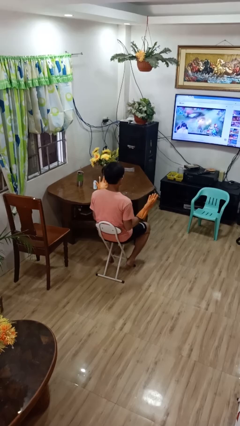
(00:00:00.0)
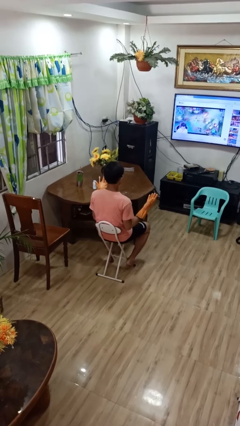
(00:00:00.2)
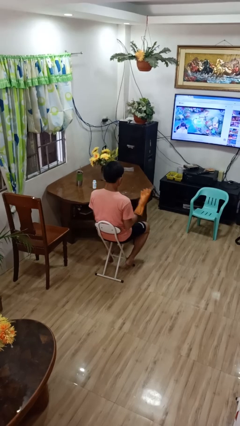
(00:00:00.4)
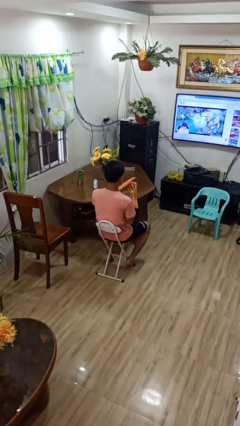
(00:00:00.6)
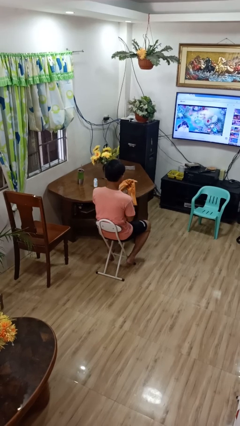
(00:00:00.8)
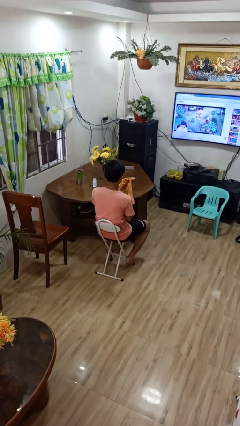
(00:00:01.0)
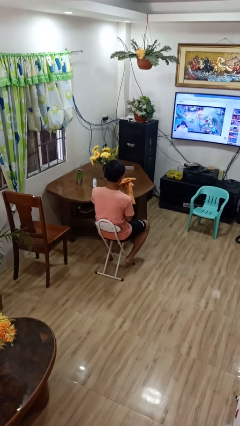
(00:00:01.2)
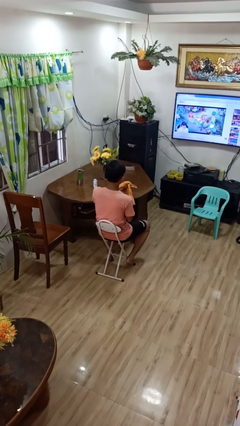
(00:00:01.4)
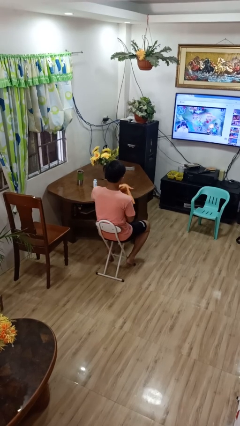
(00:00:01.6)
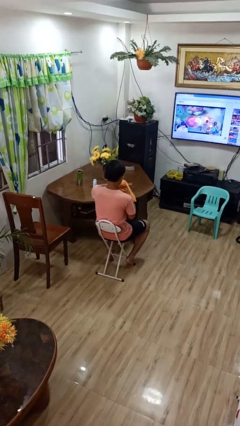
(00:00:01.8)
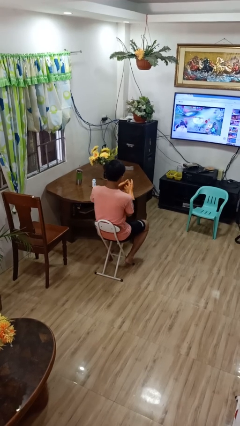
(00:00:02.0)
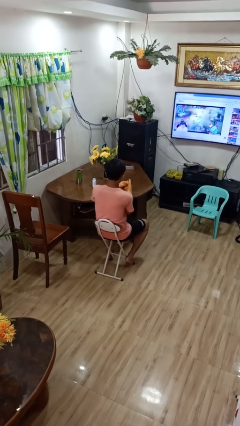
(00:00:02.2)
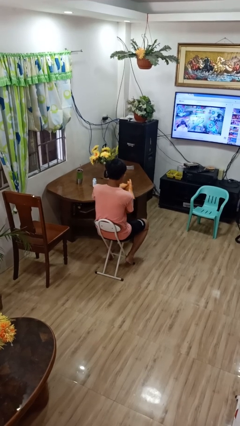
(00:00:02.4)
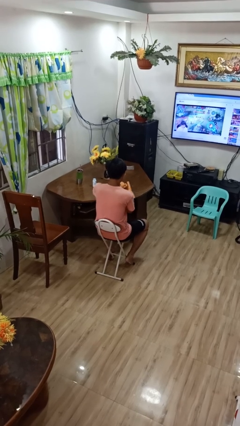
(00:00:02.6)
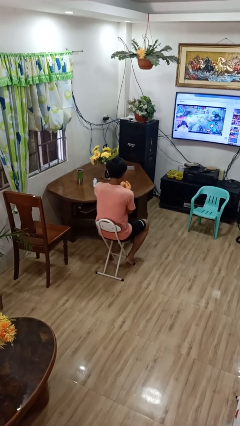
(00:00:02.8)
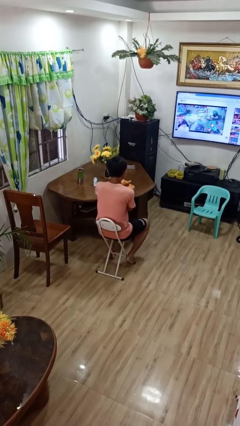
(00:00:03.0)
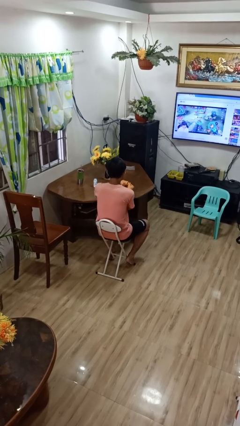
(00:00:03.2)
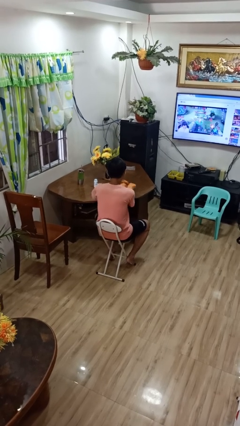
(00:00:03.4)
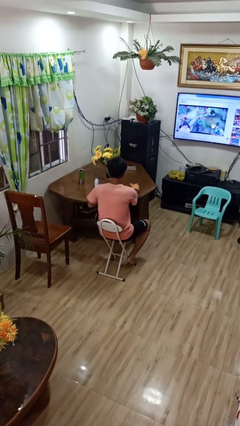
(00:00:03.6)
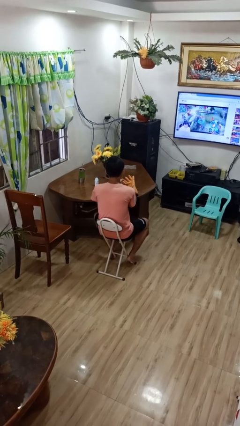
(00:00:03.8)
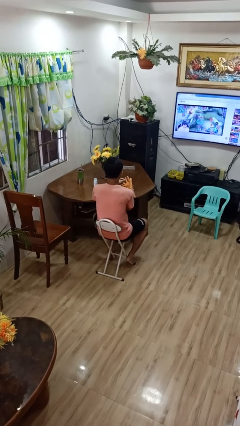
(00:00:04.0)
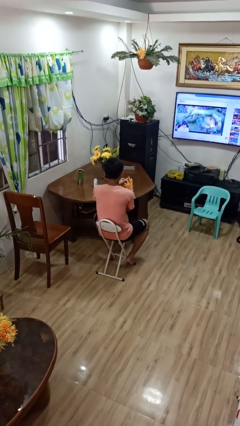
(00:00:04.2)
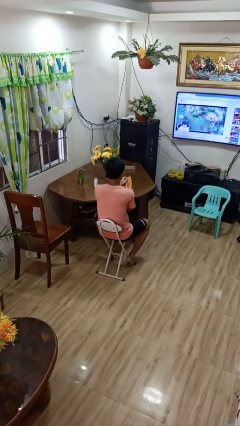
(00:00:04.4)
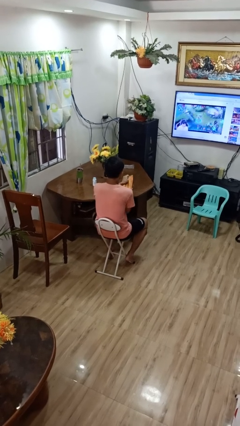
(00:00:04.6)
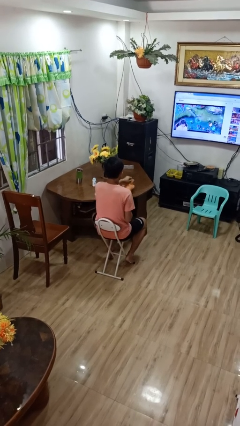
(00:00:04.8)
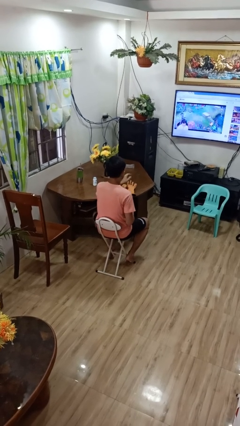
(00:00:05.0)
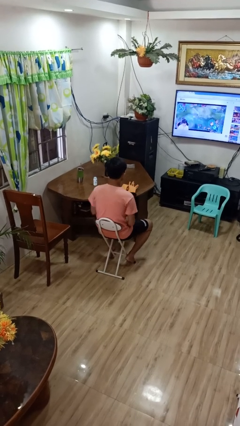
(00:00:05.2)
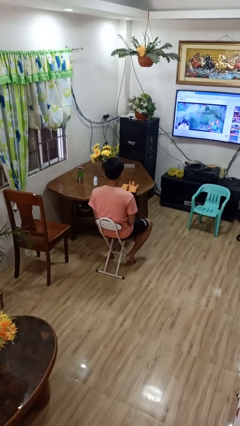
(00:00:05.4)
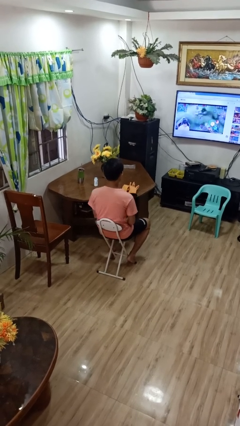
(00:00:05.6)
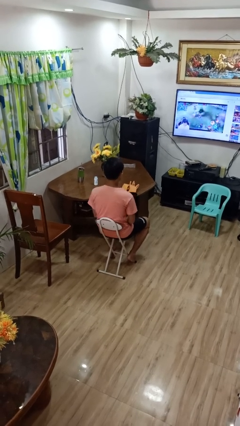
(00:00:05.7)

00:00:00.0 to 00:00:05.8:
person takes off gloves

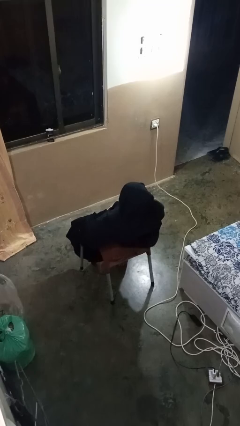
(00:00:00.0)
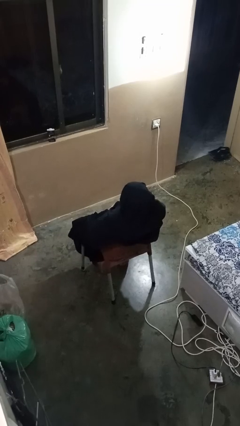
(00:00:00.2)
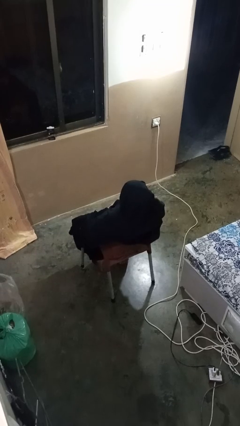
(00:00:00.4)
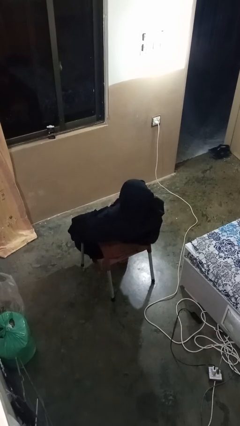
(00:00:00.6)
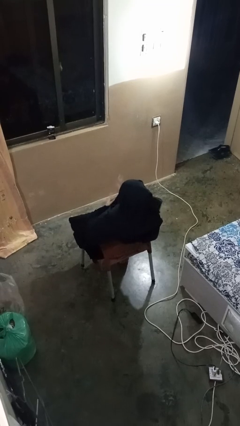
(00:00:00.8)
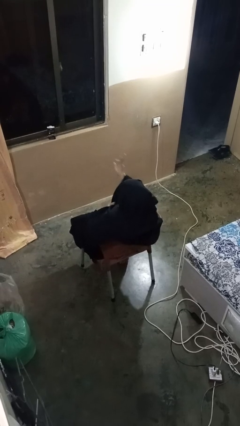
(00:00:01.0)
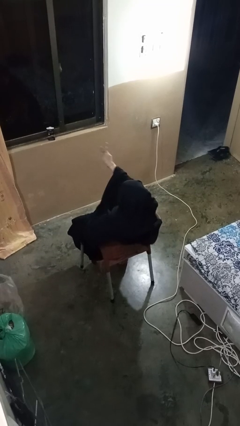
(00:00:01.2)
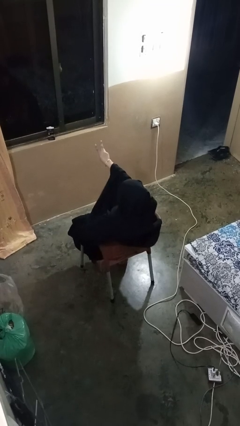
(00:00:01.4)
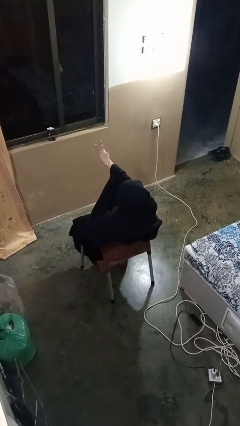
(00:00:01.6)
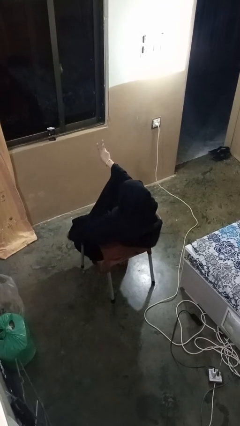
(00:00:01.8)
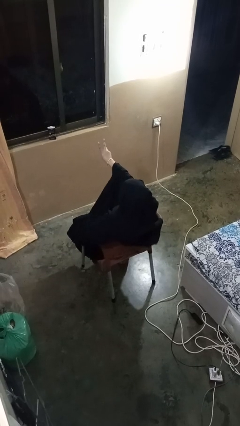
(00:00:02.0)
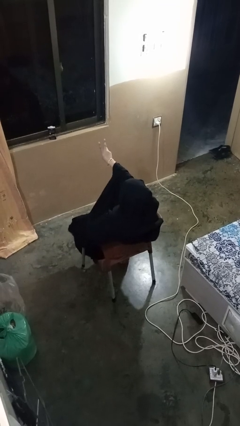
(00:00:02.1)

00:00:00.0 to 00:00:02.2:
person gestures peace

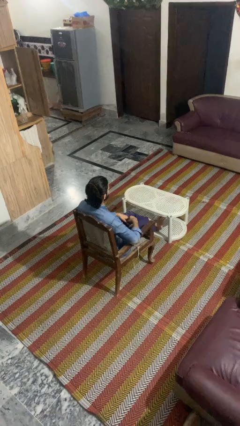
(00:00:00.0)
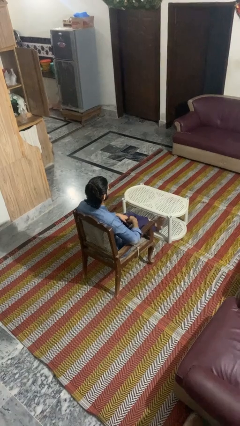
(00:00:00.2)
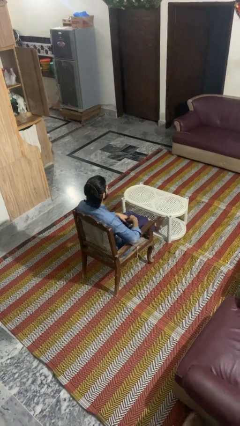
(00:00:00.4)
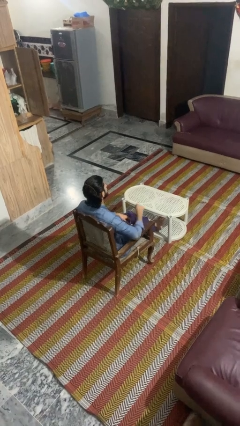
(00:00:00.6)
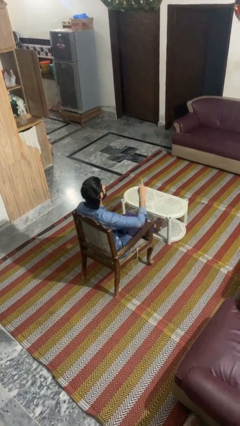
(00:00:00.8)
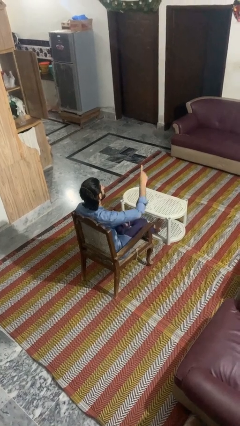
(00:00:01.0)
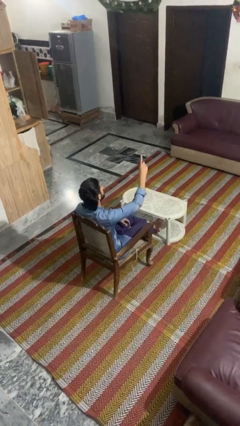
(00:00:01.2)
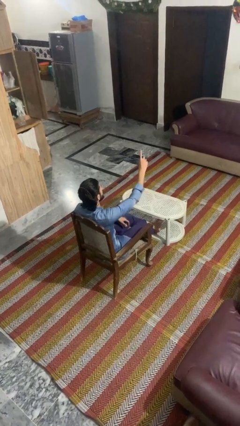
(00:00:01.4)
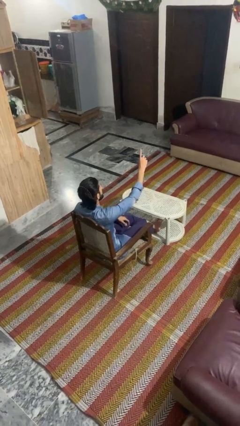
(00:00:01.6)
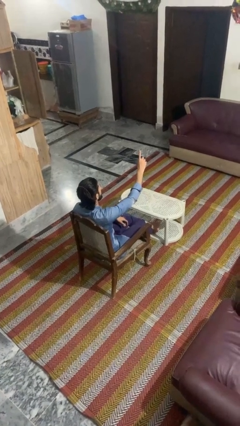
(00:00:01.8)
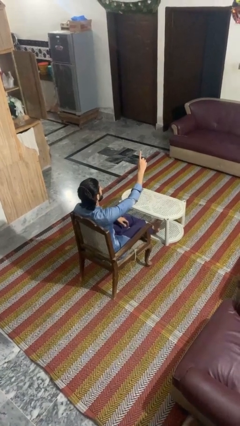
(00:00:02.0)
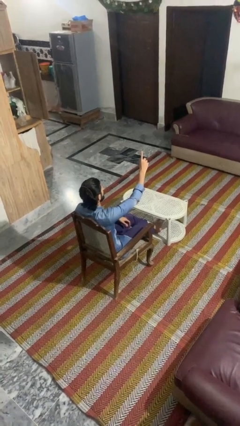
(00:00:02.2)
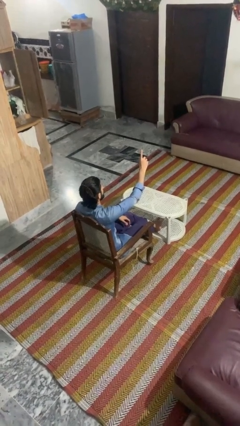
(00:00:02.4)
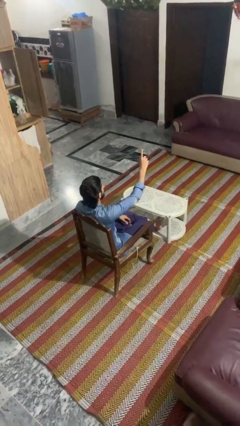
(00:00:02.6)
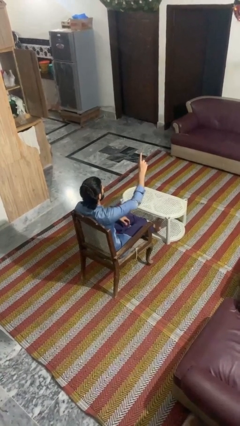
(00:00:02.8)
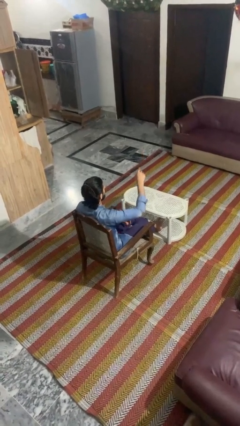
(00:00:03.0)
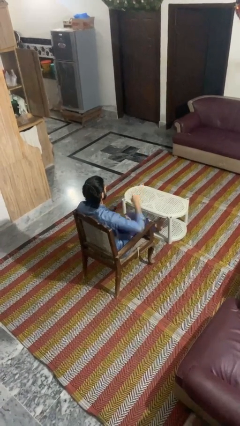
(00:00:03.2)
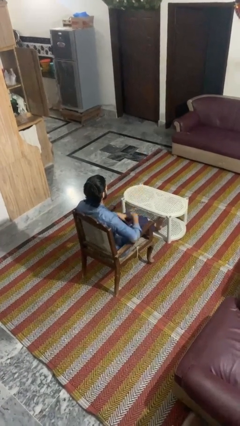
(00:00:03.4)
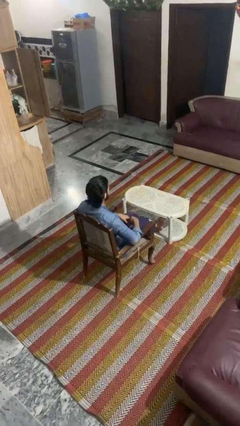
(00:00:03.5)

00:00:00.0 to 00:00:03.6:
person gestures number one

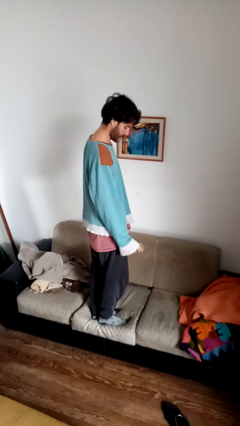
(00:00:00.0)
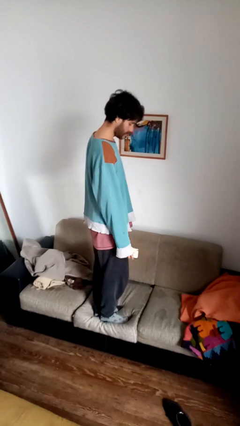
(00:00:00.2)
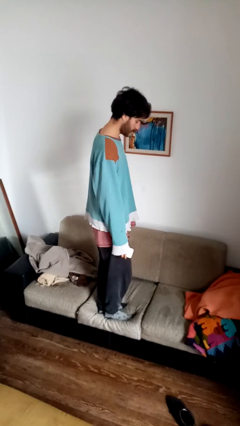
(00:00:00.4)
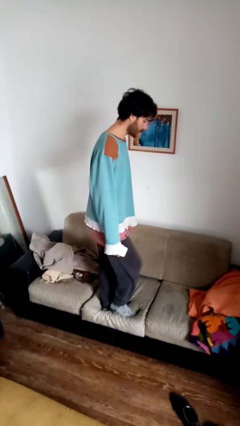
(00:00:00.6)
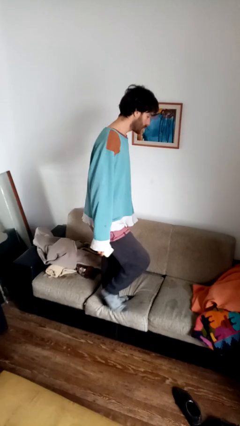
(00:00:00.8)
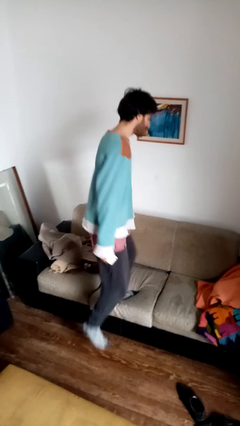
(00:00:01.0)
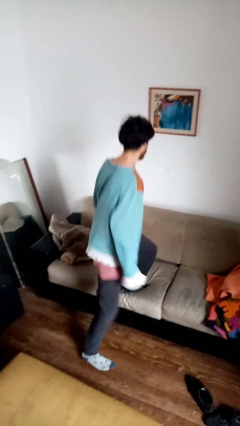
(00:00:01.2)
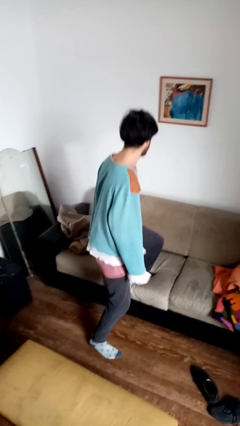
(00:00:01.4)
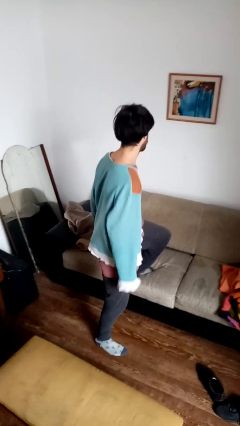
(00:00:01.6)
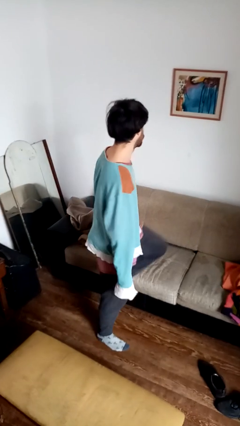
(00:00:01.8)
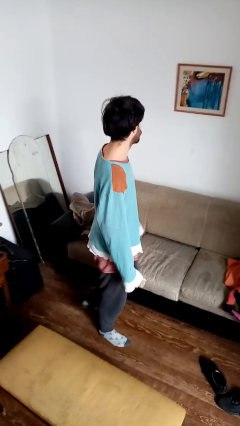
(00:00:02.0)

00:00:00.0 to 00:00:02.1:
person climbs off couch

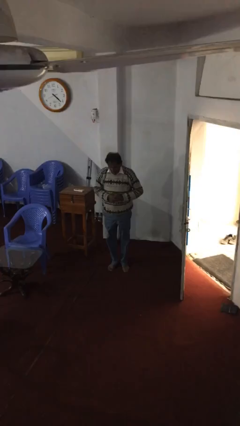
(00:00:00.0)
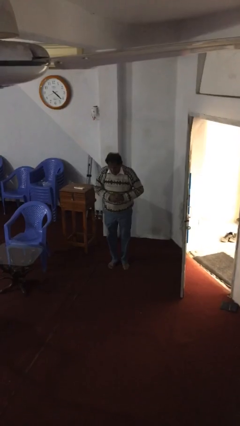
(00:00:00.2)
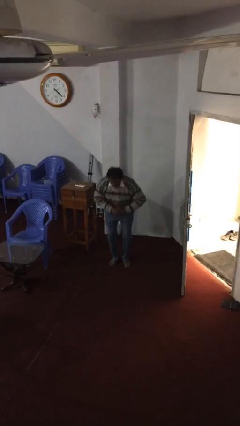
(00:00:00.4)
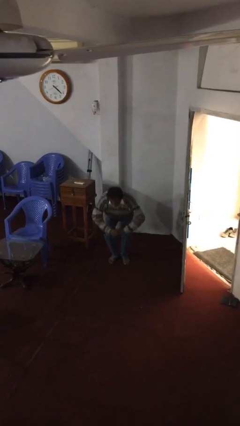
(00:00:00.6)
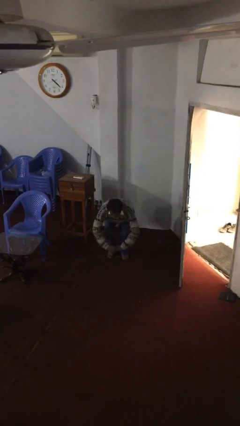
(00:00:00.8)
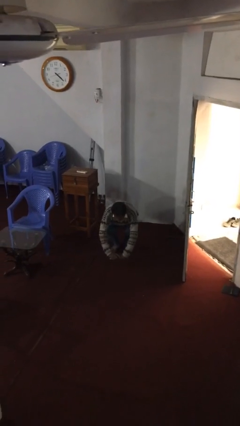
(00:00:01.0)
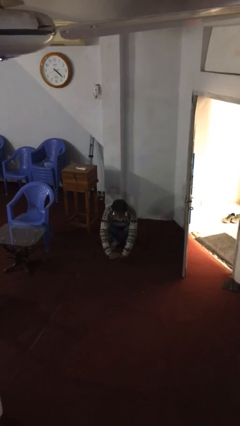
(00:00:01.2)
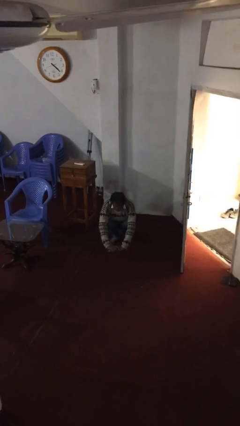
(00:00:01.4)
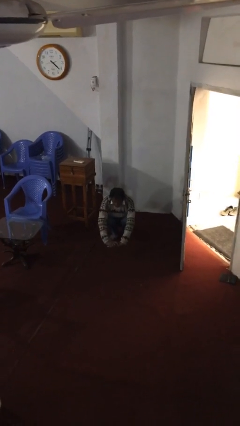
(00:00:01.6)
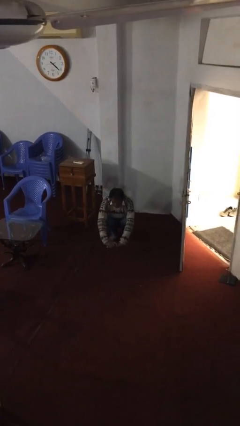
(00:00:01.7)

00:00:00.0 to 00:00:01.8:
person sits down

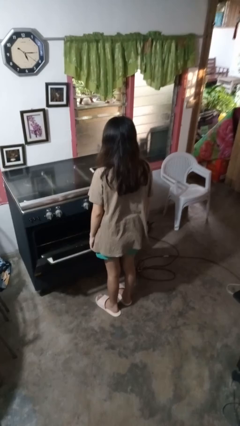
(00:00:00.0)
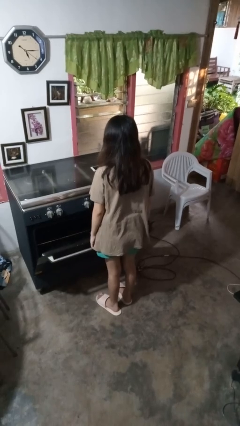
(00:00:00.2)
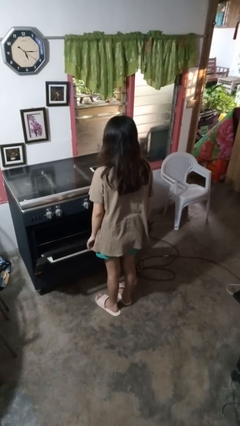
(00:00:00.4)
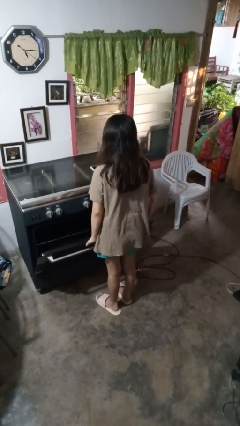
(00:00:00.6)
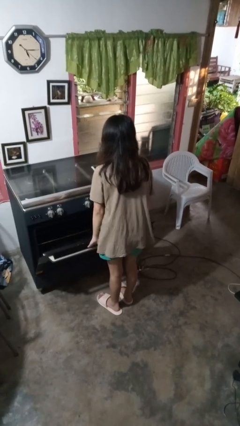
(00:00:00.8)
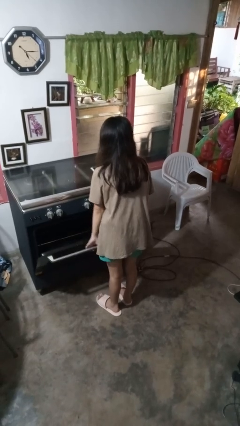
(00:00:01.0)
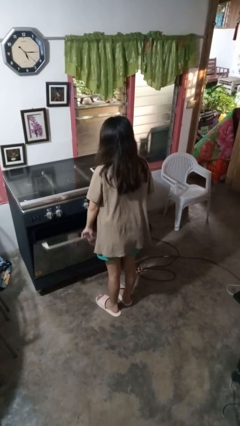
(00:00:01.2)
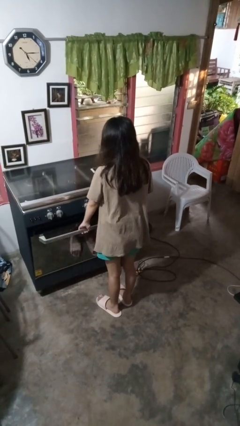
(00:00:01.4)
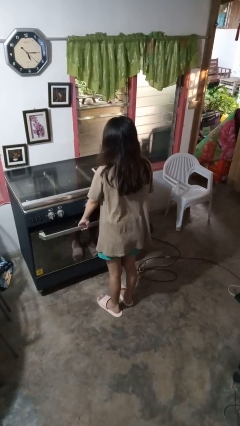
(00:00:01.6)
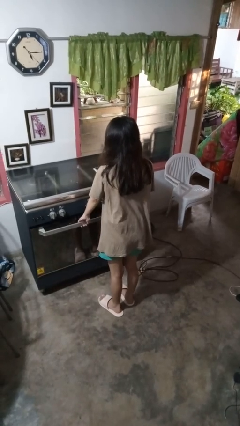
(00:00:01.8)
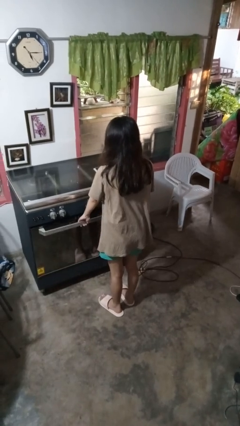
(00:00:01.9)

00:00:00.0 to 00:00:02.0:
person closes oven door
